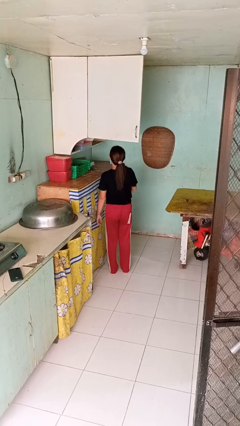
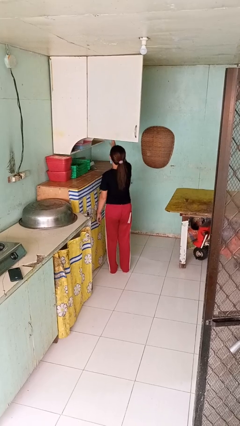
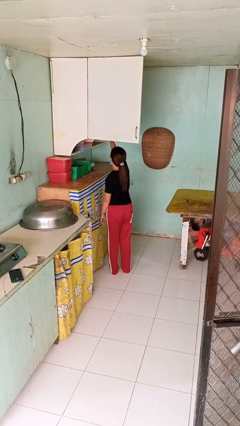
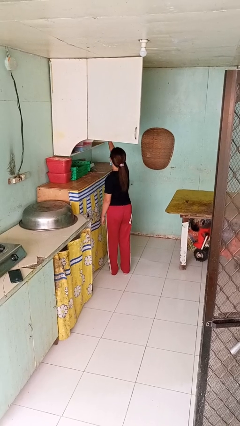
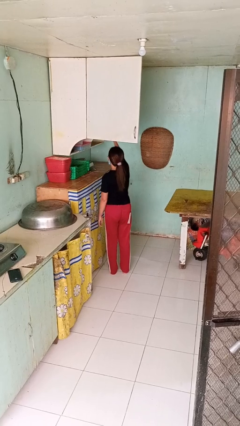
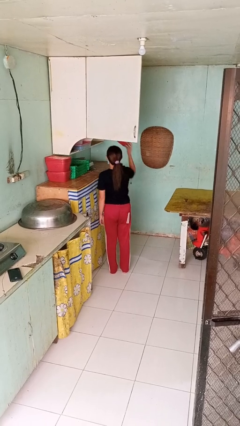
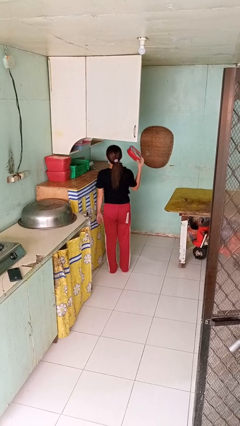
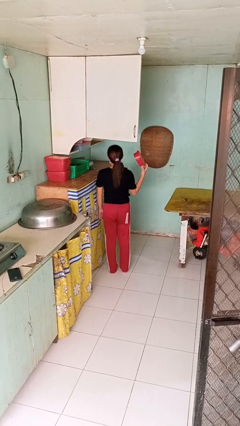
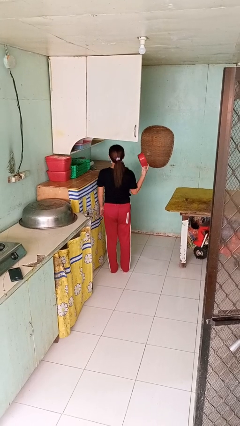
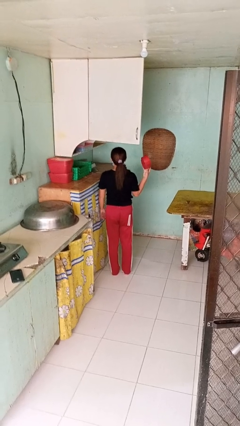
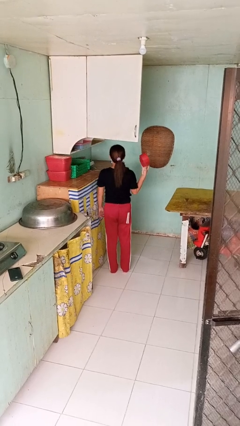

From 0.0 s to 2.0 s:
person takes object from cabinet

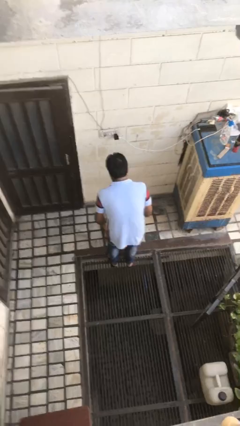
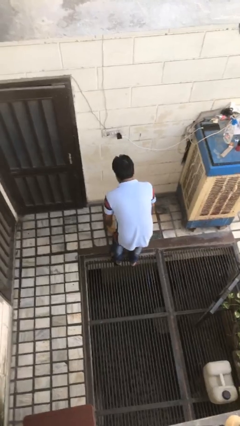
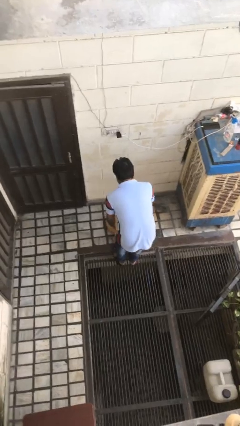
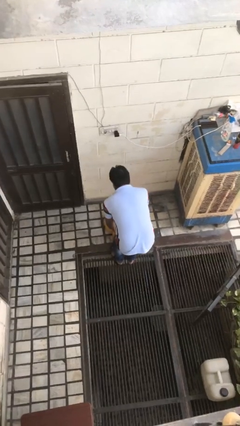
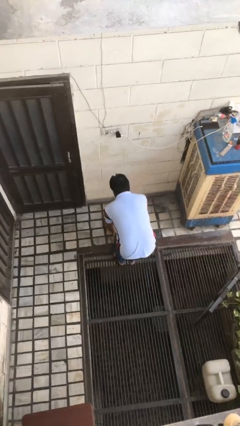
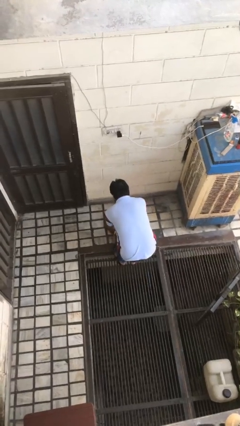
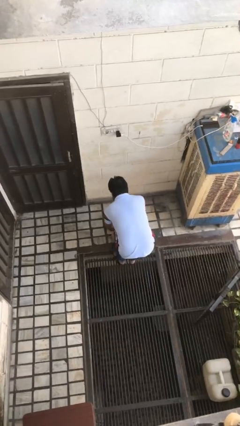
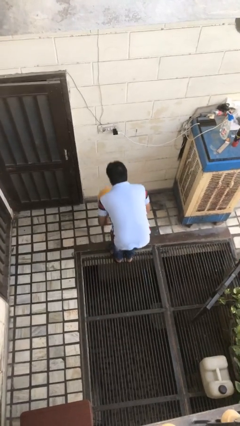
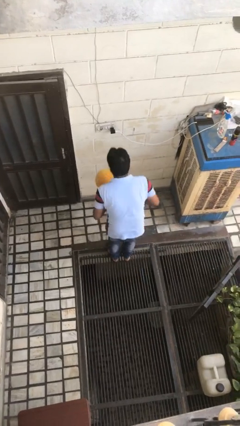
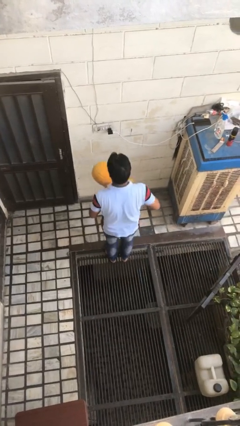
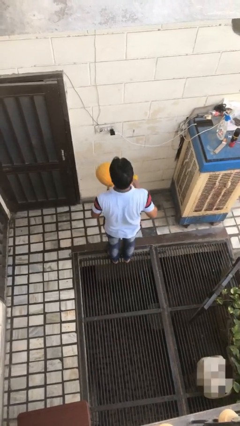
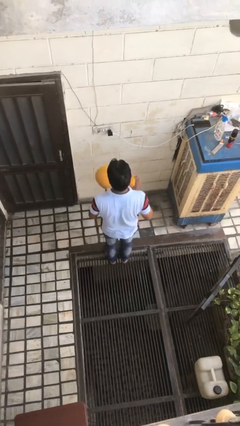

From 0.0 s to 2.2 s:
person picks up object from floor

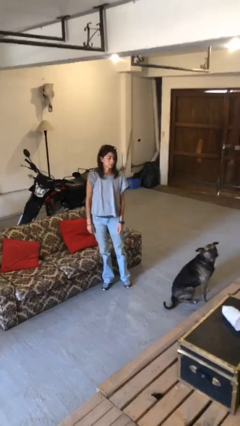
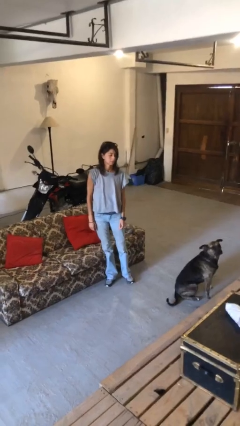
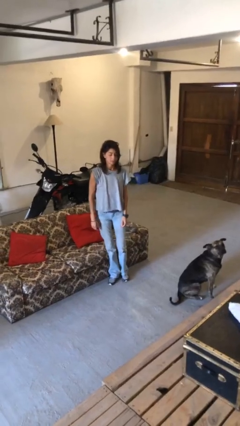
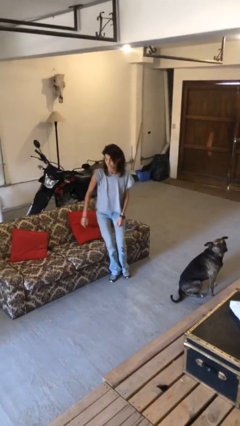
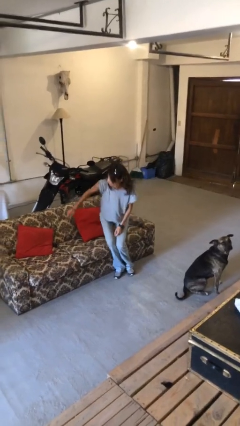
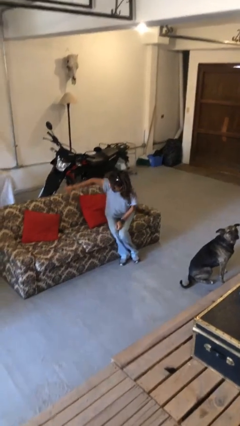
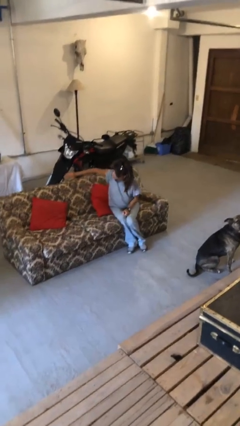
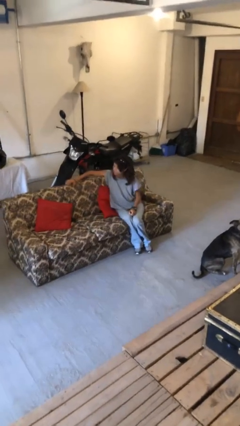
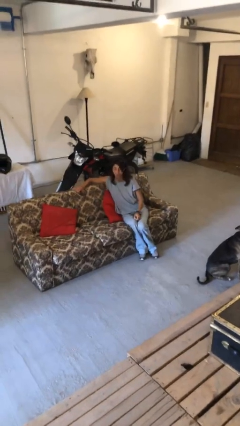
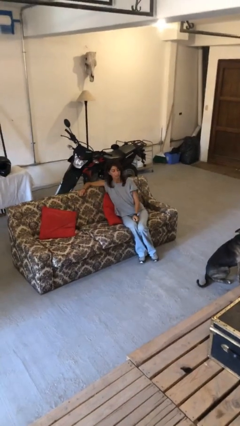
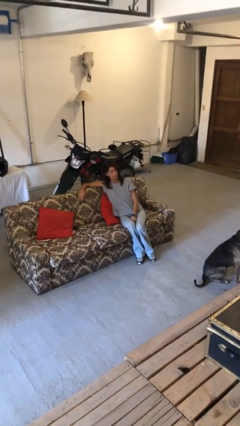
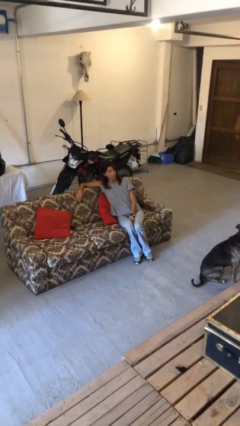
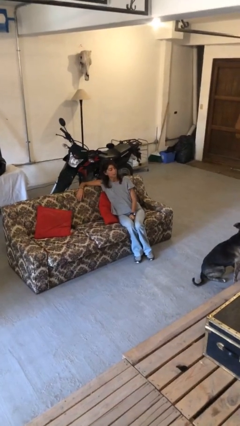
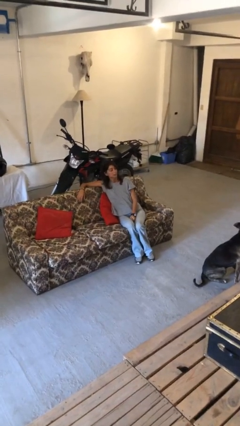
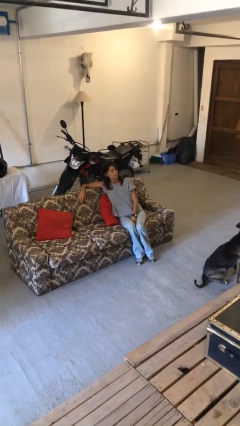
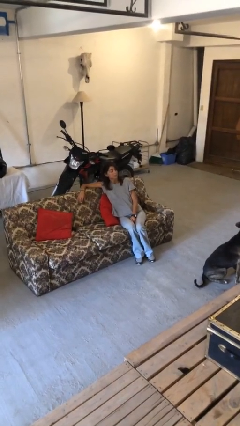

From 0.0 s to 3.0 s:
person lies down on couch

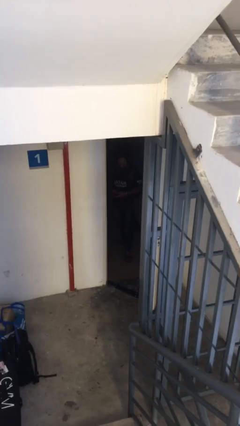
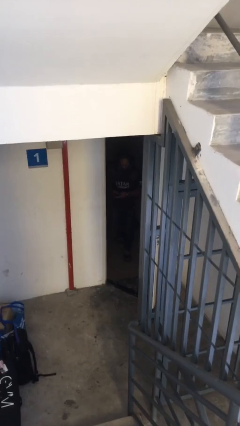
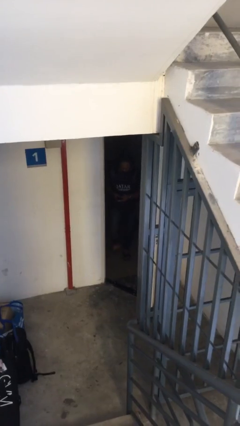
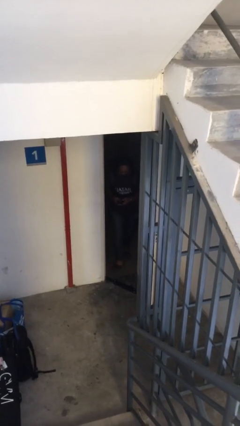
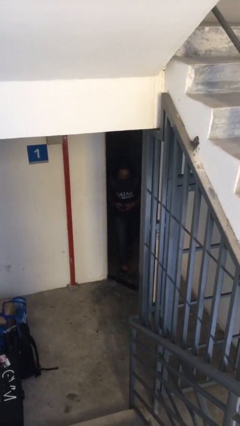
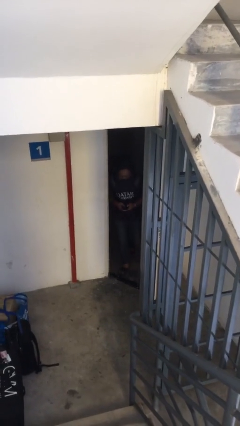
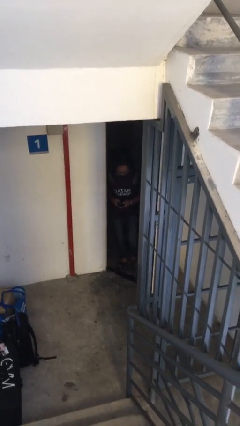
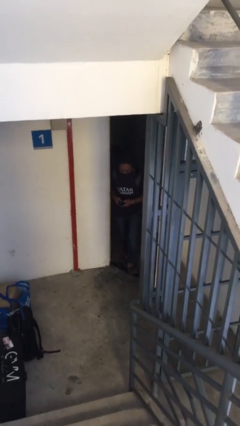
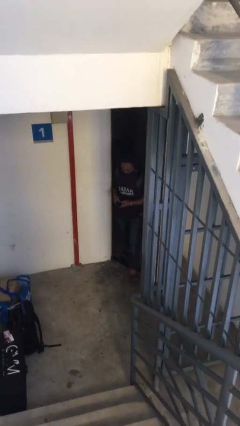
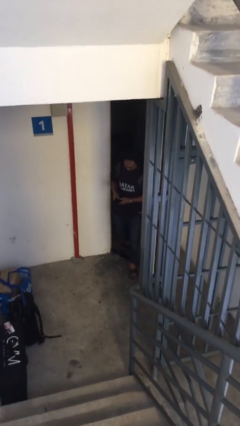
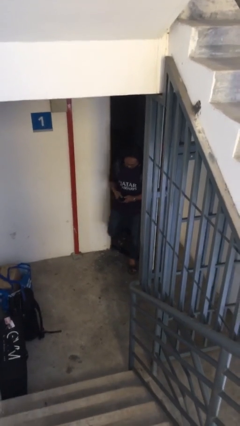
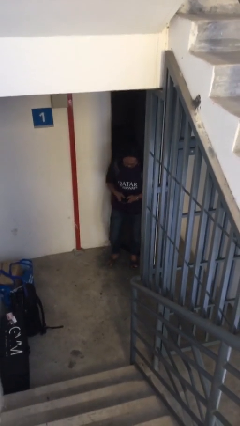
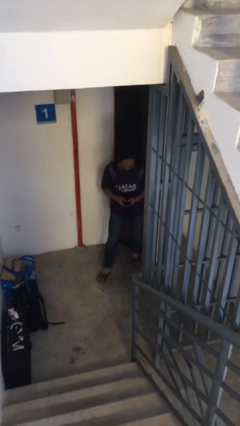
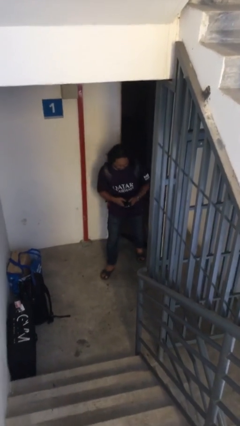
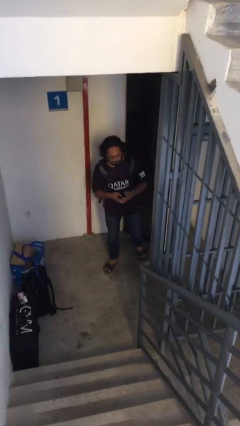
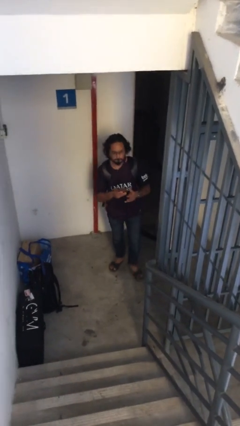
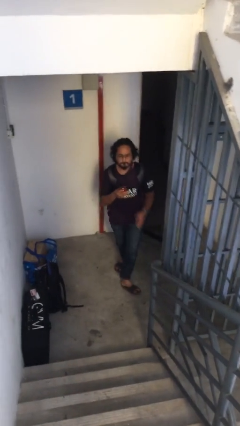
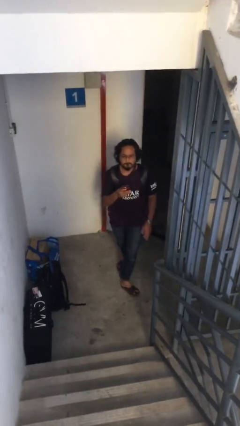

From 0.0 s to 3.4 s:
person enters scene through structure

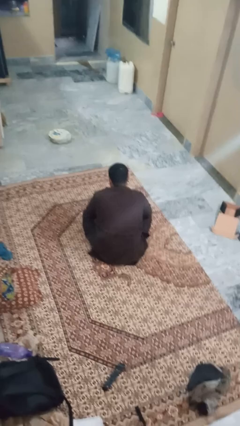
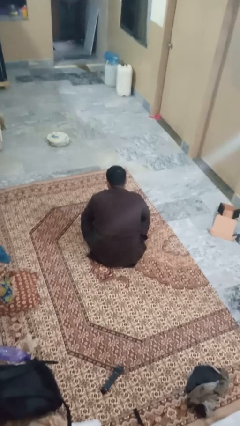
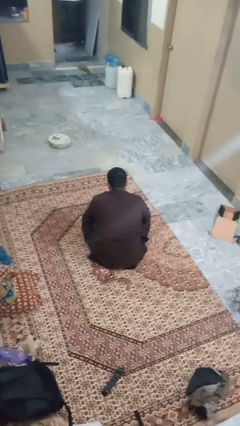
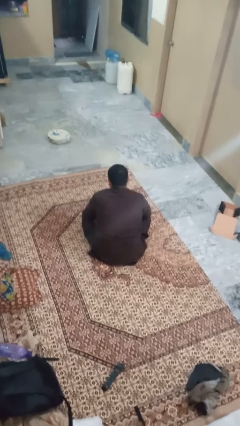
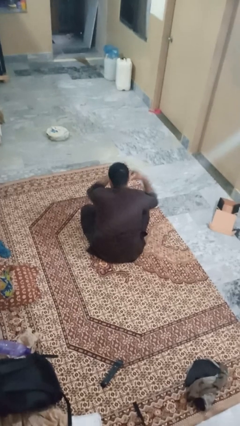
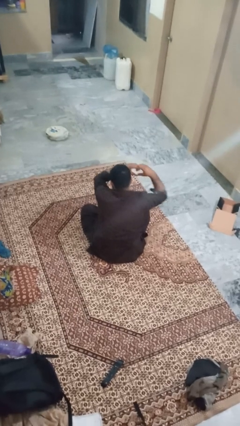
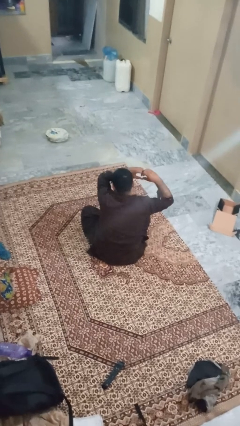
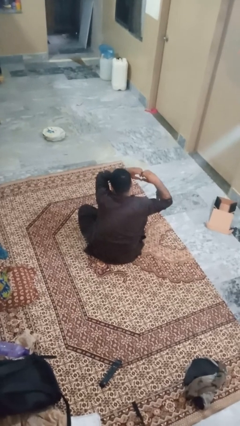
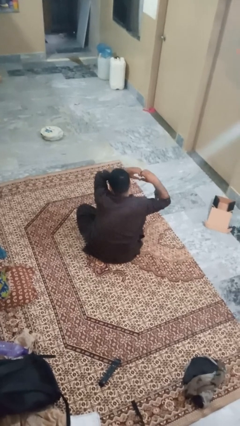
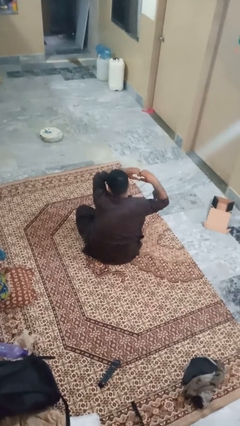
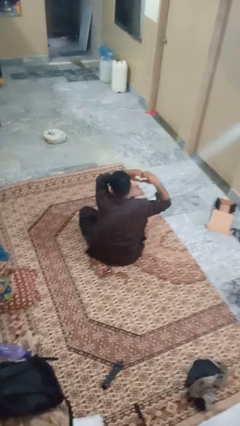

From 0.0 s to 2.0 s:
person gestures heart

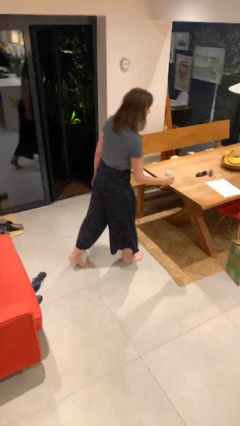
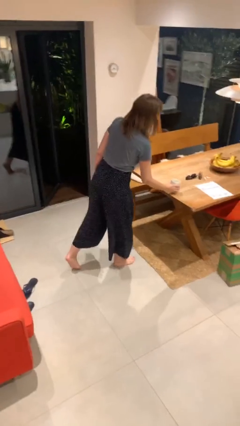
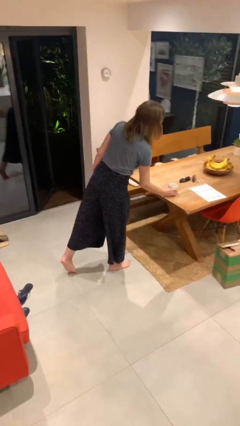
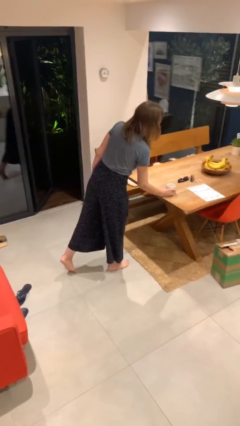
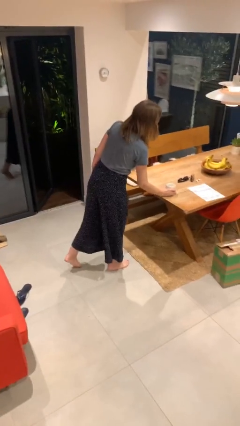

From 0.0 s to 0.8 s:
person puts down object on table

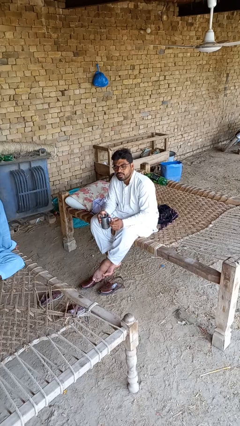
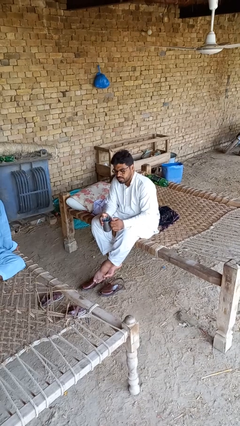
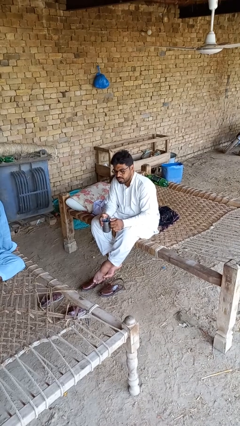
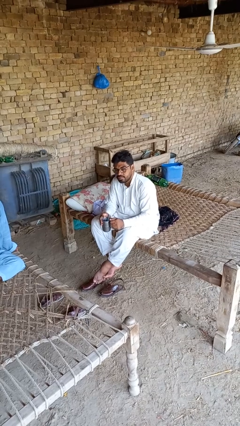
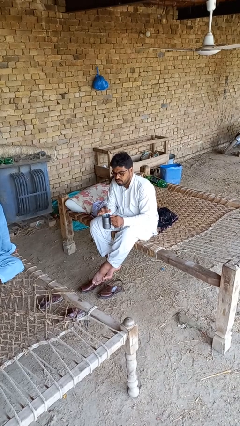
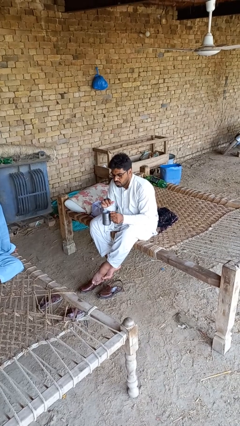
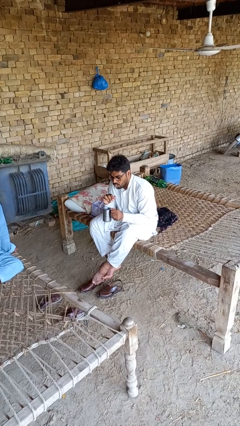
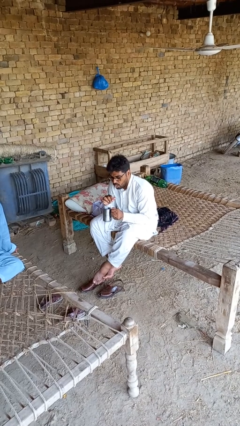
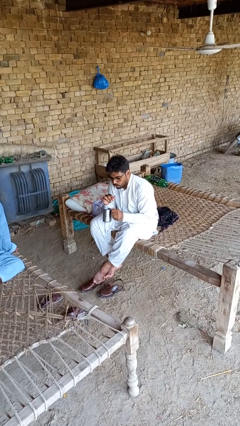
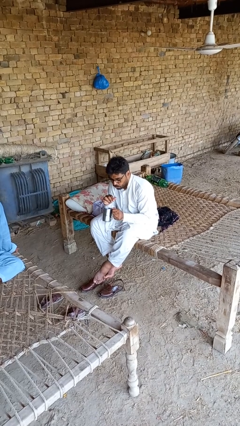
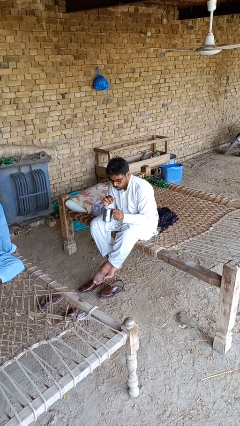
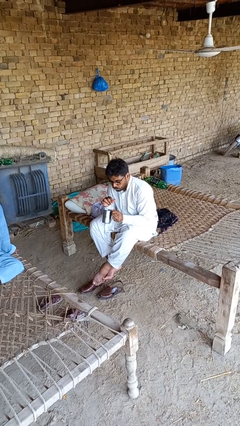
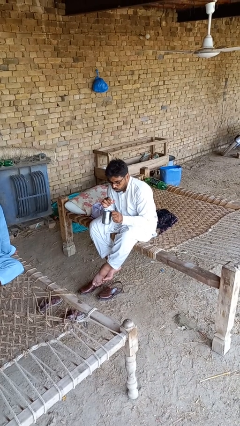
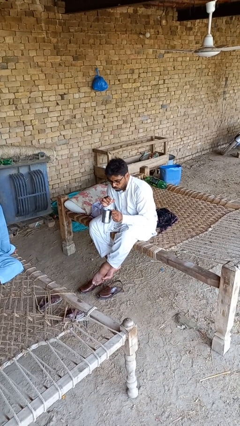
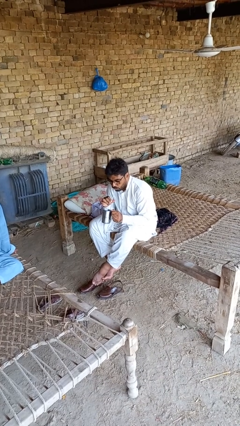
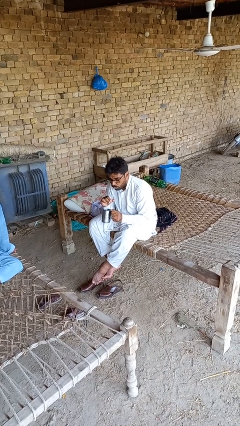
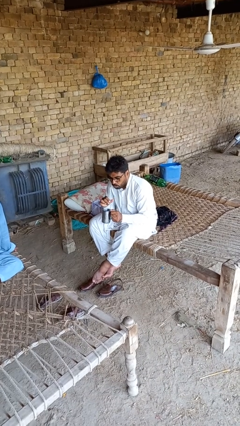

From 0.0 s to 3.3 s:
person drinks from straw

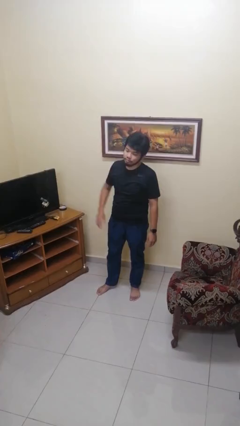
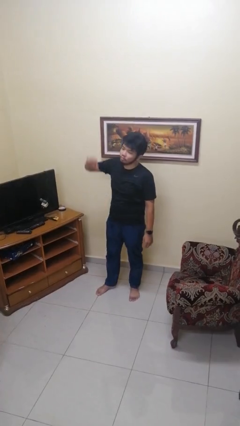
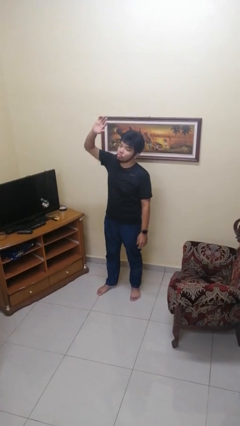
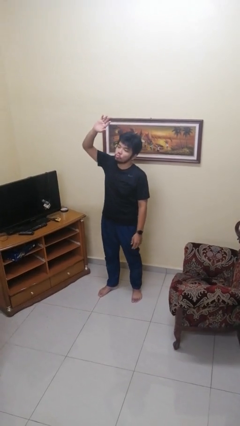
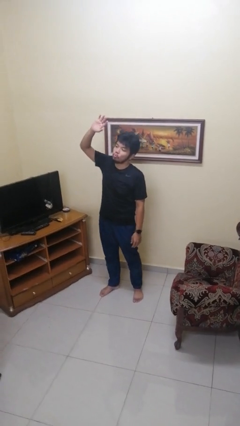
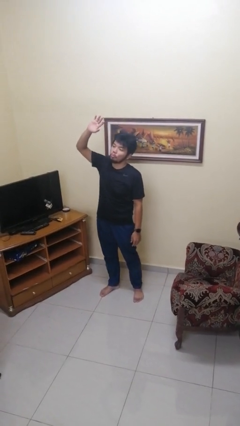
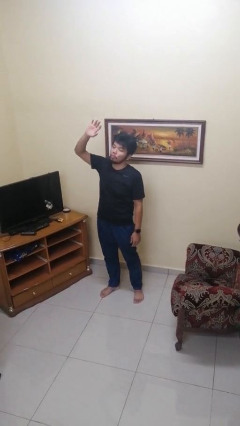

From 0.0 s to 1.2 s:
person gestures raise hand
